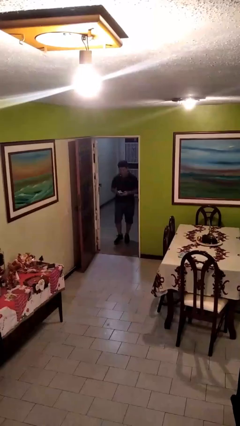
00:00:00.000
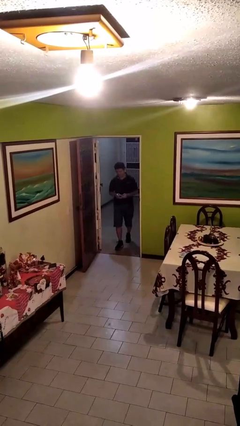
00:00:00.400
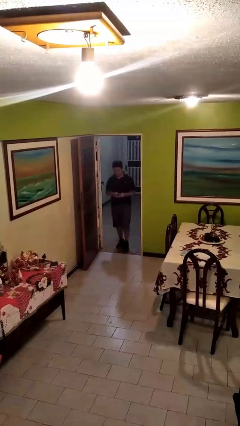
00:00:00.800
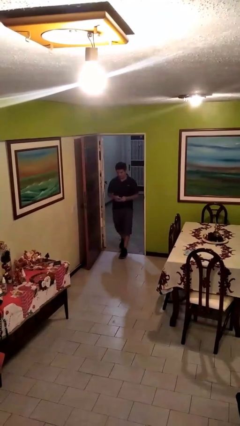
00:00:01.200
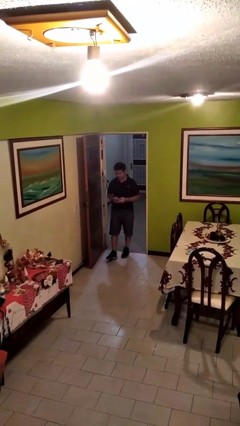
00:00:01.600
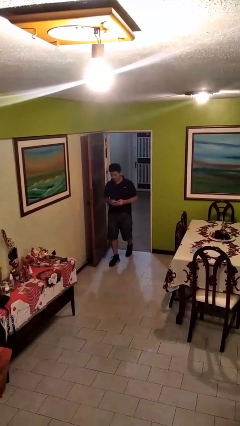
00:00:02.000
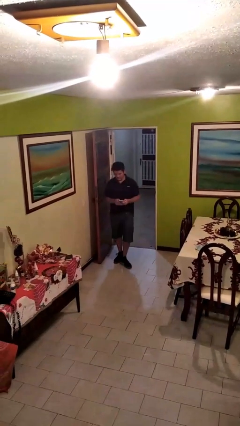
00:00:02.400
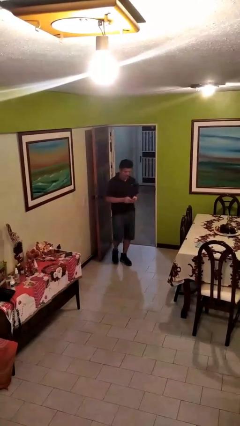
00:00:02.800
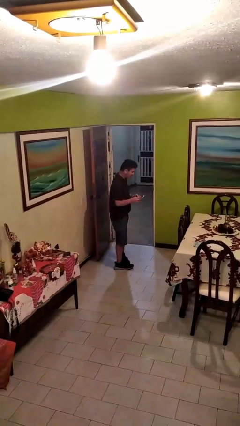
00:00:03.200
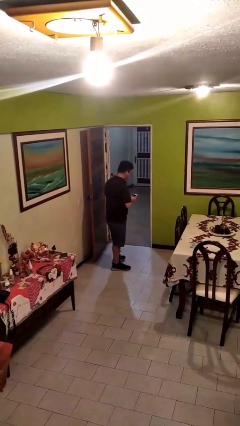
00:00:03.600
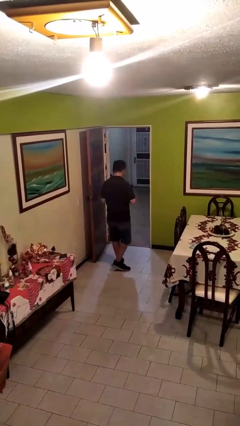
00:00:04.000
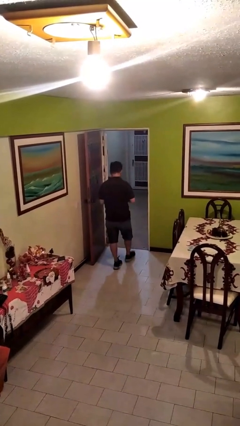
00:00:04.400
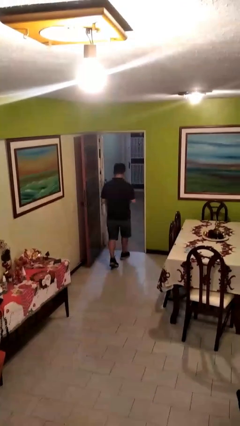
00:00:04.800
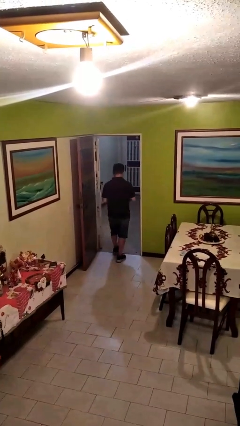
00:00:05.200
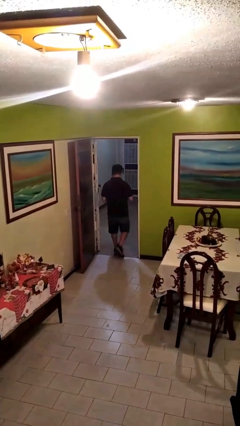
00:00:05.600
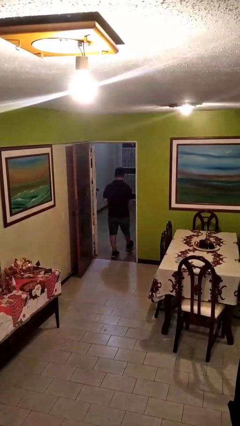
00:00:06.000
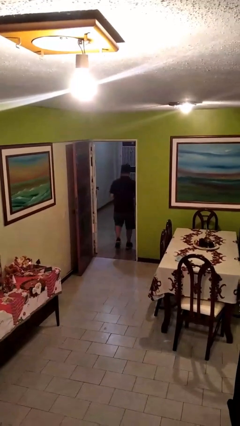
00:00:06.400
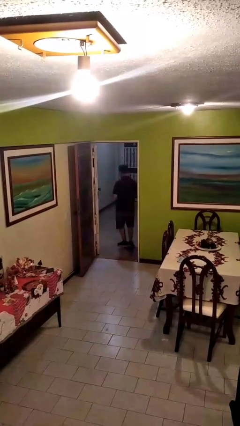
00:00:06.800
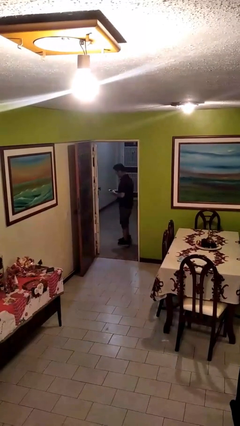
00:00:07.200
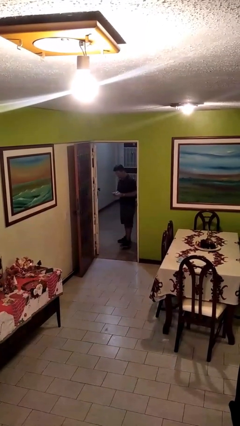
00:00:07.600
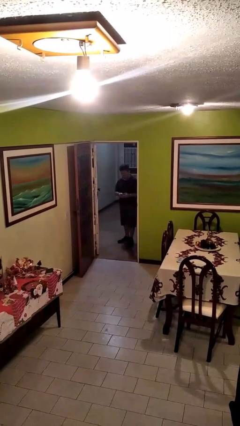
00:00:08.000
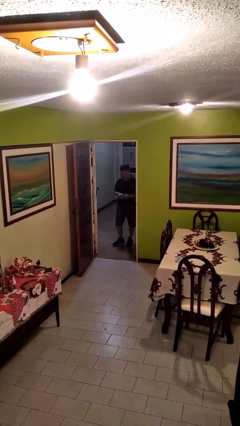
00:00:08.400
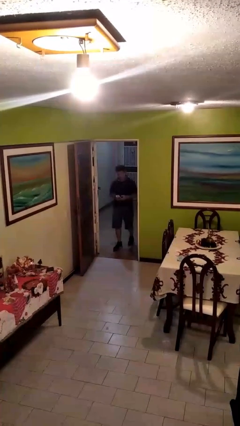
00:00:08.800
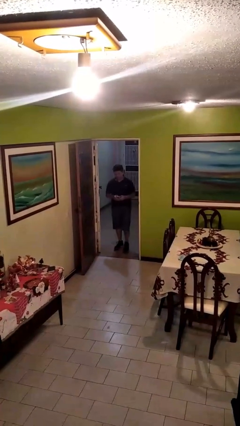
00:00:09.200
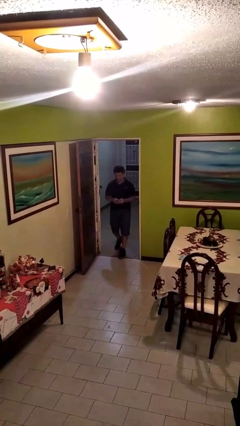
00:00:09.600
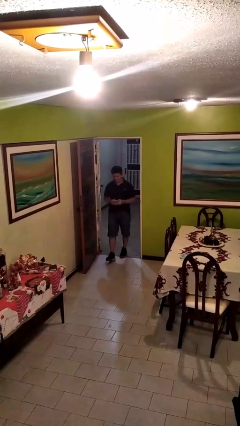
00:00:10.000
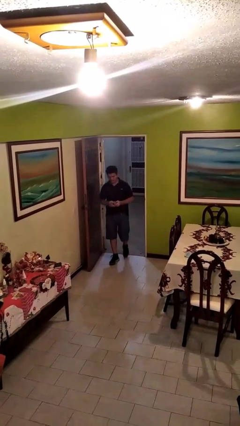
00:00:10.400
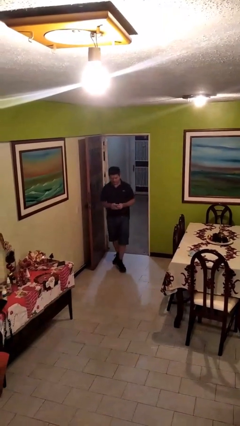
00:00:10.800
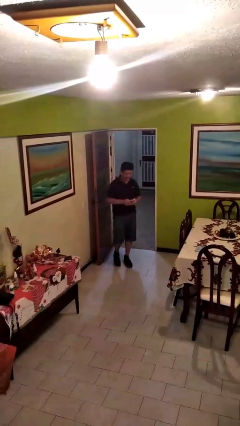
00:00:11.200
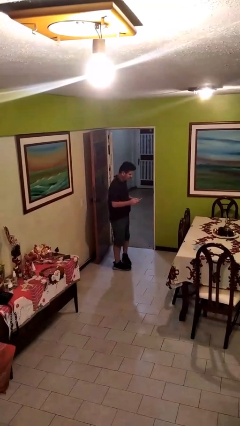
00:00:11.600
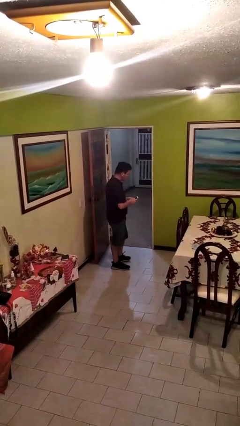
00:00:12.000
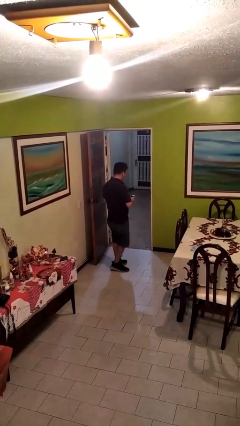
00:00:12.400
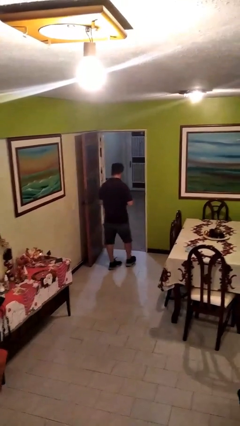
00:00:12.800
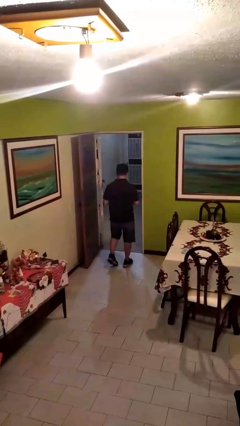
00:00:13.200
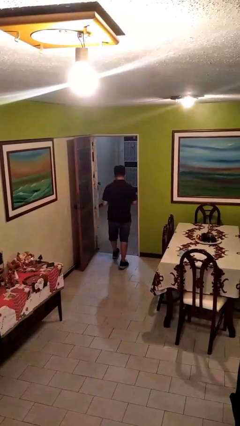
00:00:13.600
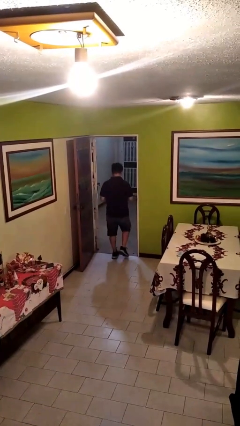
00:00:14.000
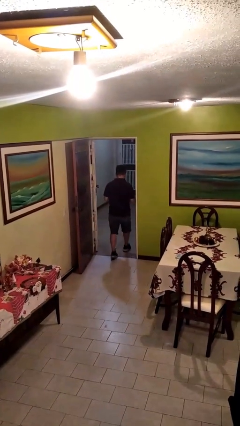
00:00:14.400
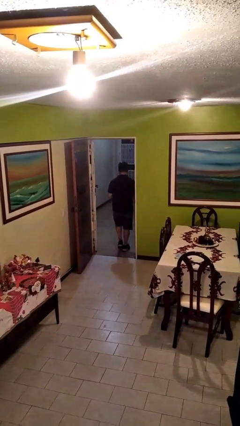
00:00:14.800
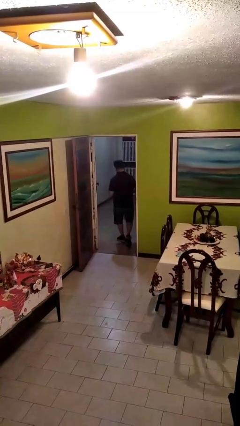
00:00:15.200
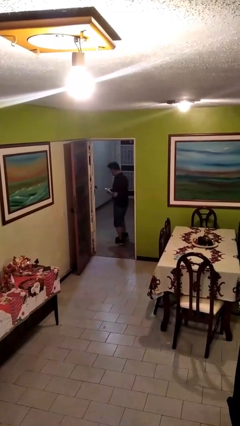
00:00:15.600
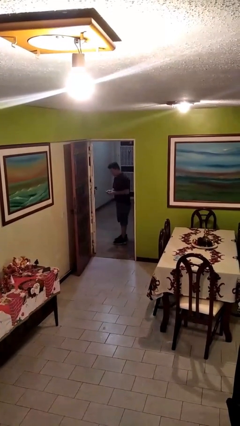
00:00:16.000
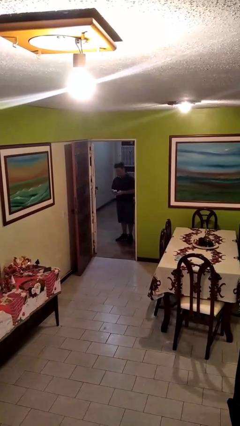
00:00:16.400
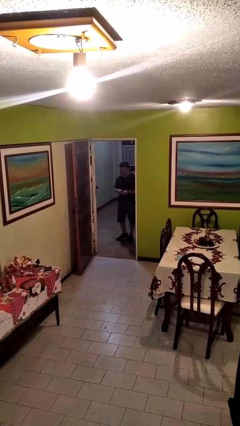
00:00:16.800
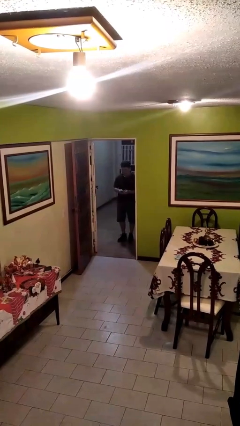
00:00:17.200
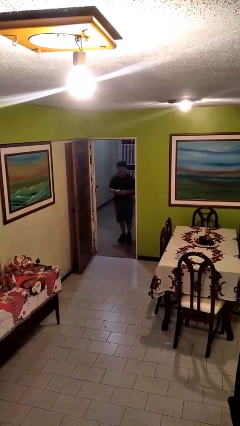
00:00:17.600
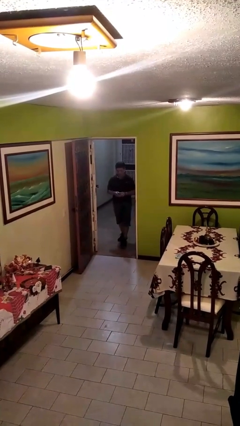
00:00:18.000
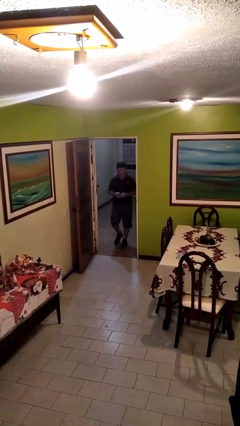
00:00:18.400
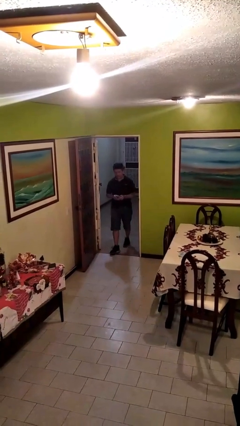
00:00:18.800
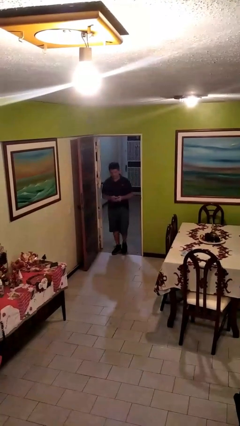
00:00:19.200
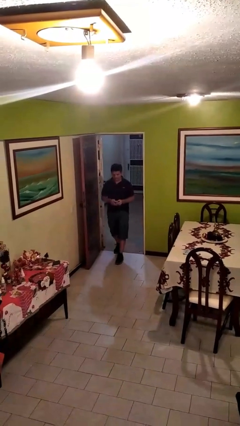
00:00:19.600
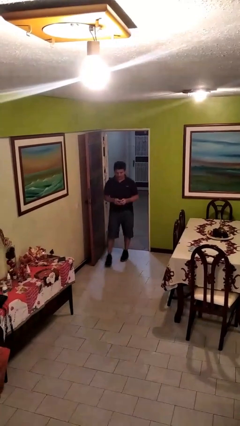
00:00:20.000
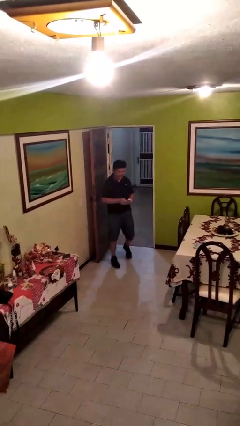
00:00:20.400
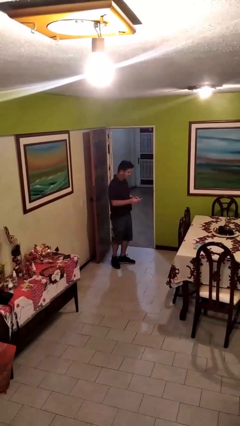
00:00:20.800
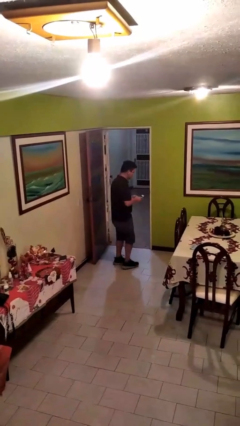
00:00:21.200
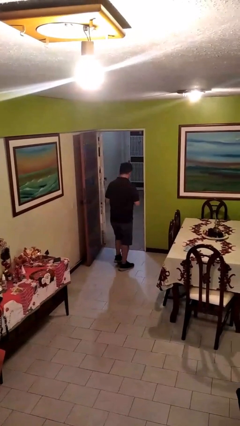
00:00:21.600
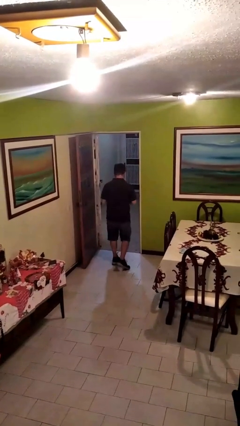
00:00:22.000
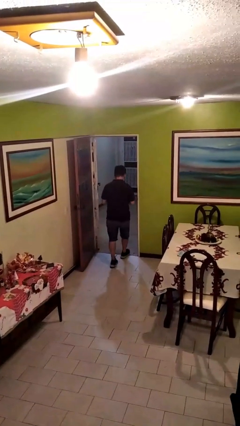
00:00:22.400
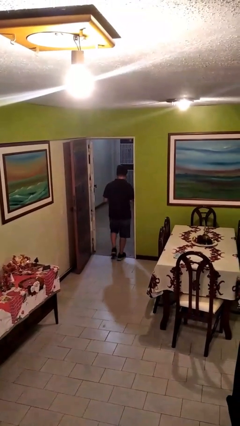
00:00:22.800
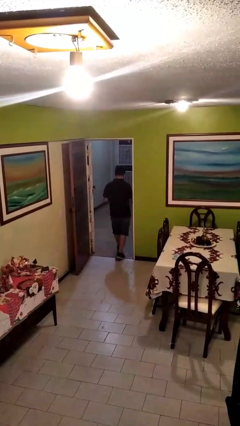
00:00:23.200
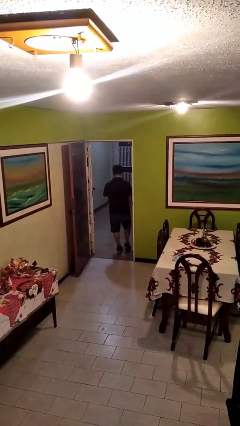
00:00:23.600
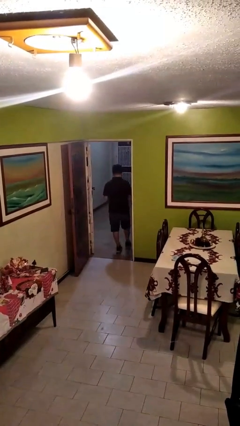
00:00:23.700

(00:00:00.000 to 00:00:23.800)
person texts on phone

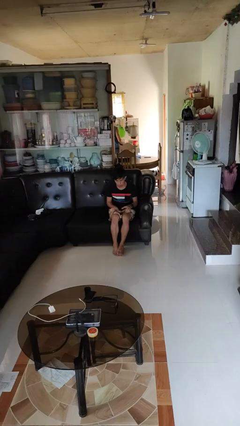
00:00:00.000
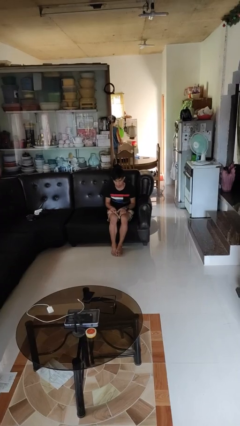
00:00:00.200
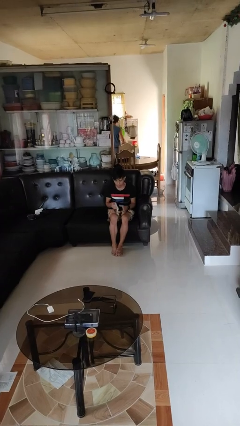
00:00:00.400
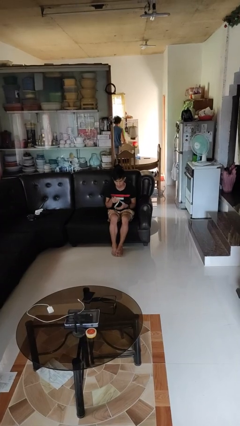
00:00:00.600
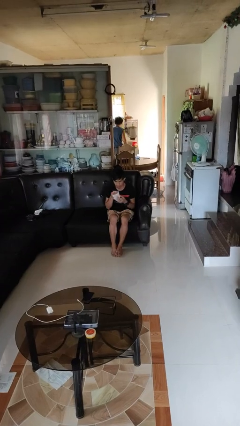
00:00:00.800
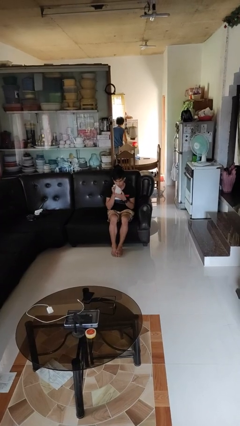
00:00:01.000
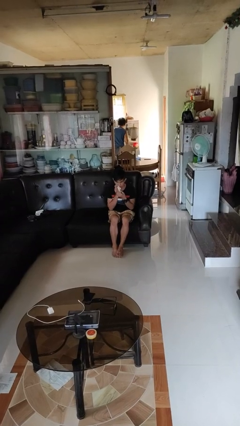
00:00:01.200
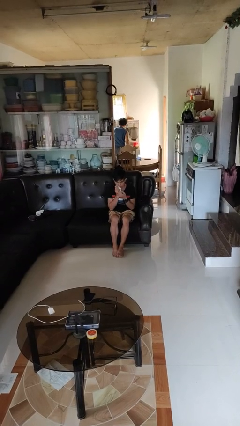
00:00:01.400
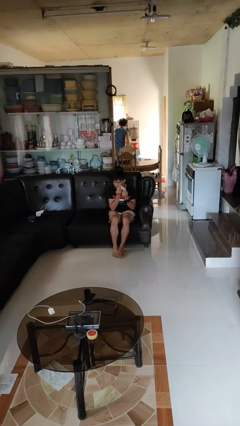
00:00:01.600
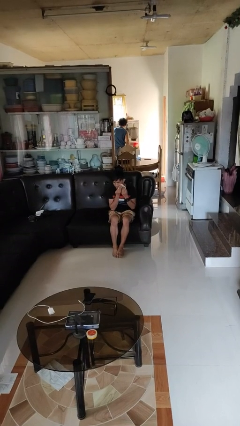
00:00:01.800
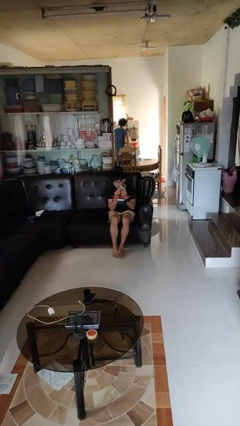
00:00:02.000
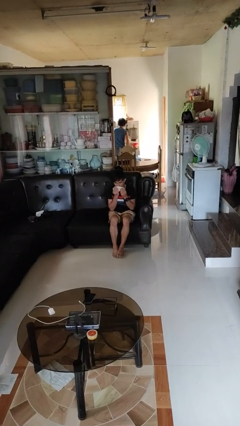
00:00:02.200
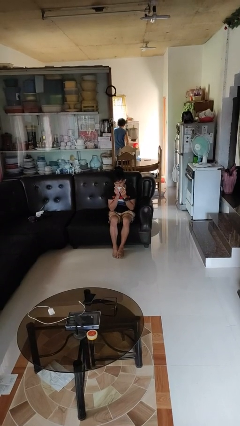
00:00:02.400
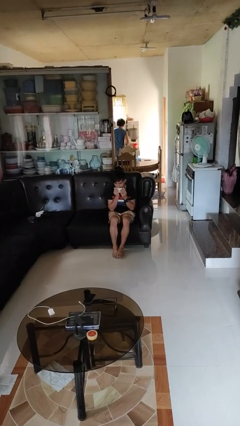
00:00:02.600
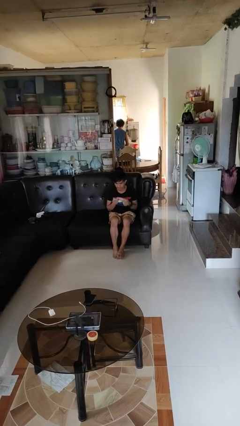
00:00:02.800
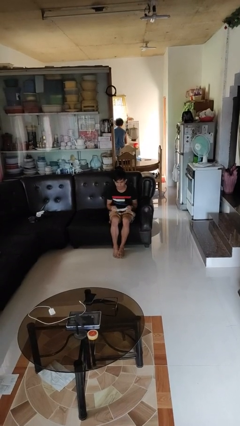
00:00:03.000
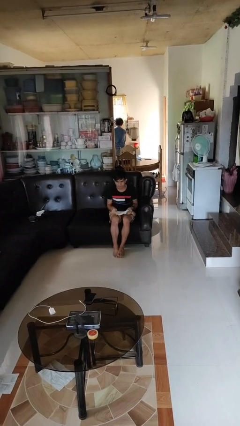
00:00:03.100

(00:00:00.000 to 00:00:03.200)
person wipes mouth with napkin

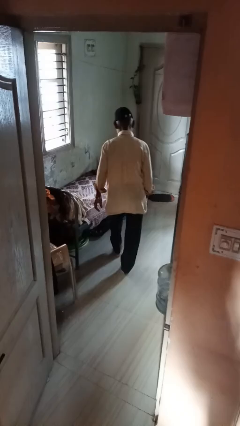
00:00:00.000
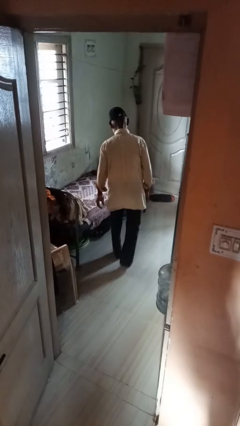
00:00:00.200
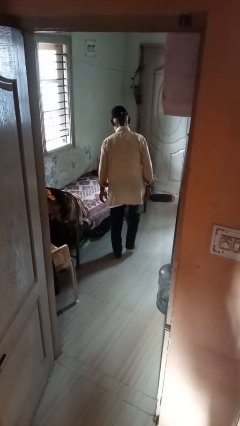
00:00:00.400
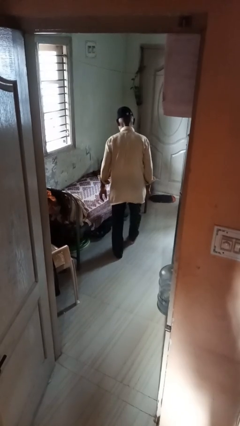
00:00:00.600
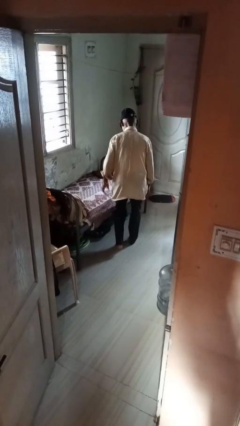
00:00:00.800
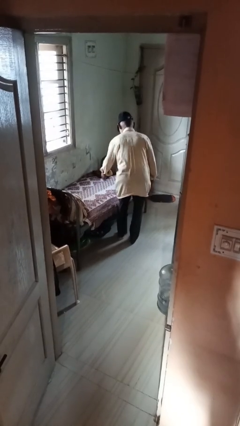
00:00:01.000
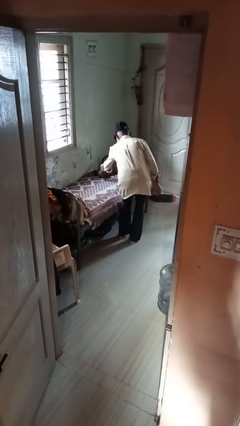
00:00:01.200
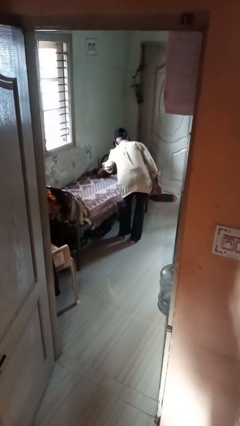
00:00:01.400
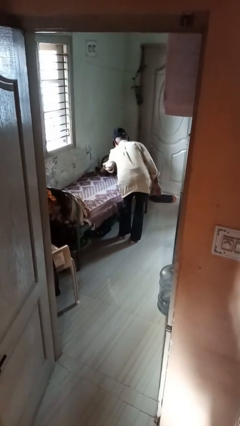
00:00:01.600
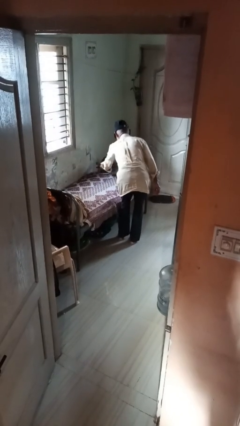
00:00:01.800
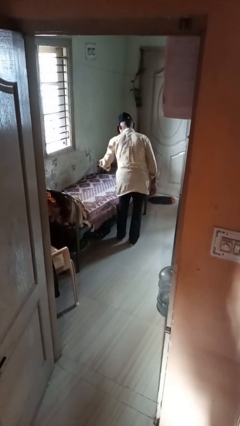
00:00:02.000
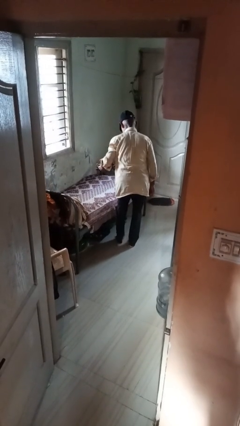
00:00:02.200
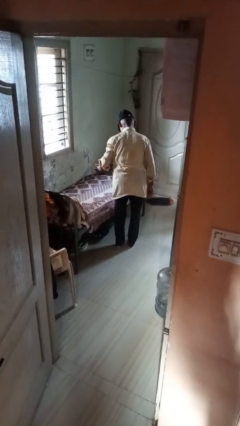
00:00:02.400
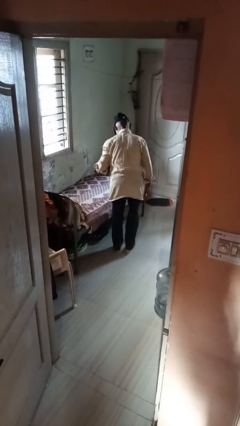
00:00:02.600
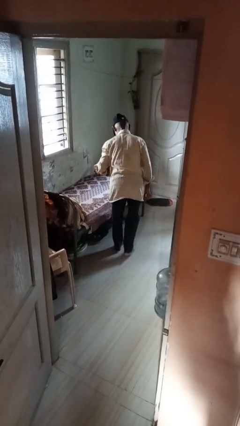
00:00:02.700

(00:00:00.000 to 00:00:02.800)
person picks up object from bed
